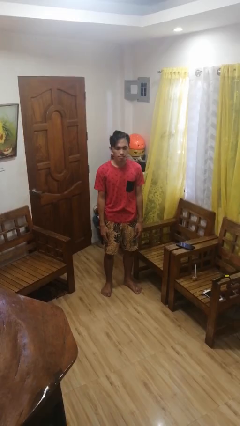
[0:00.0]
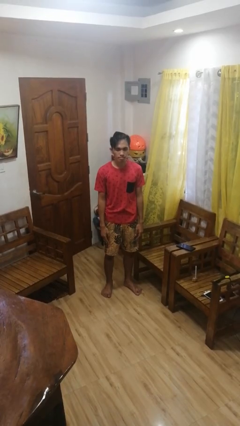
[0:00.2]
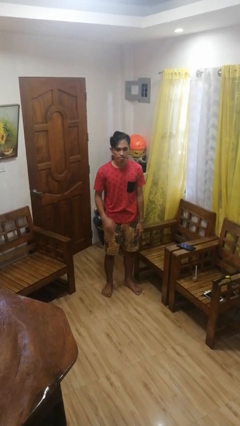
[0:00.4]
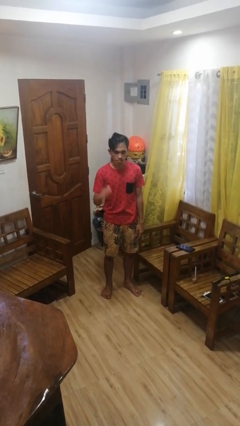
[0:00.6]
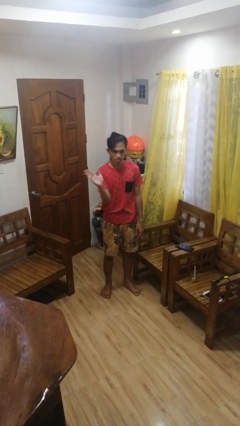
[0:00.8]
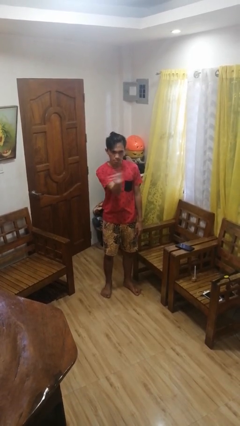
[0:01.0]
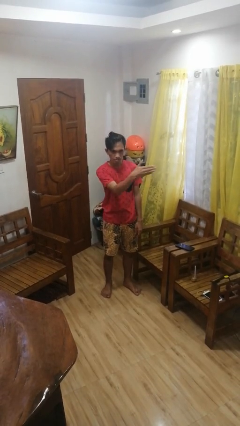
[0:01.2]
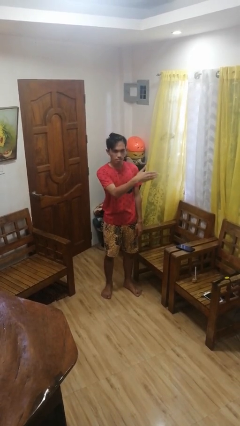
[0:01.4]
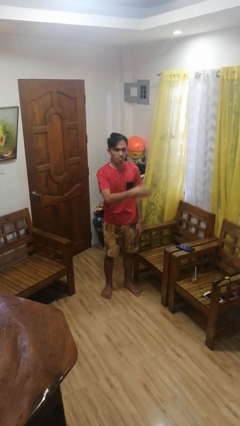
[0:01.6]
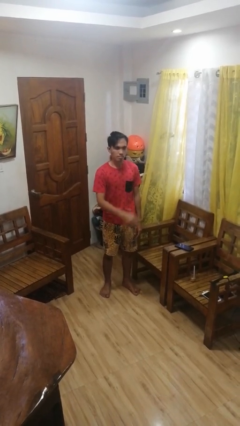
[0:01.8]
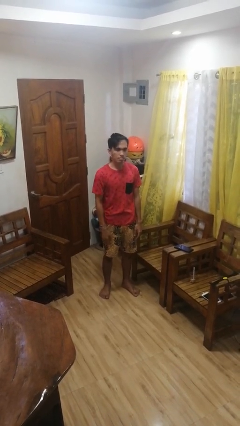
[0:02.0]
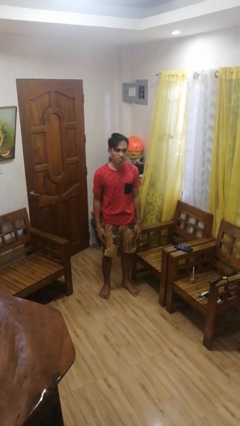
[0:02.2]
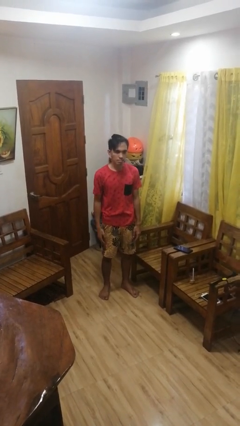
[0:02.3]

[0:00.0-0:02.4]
person gestures swipe left

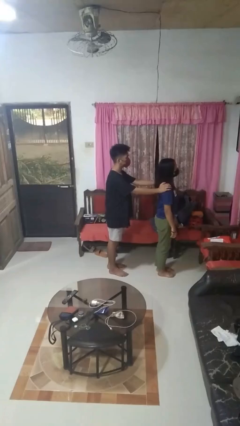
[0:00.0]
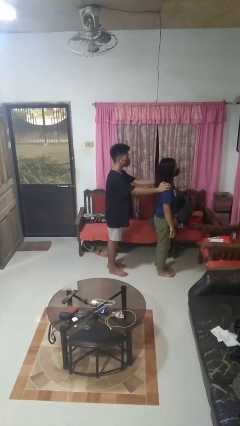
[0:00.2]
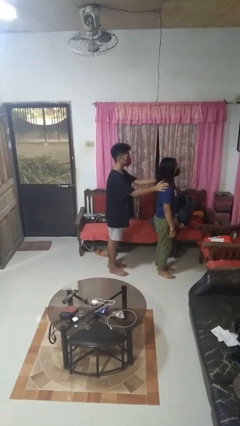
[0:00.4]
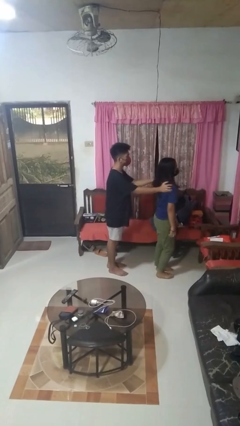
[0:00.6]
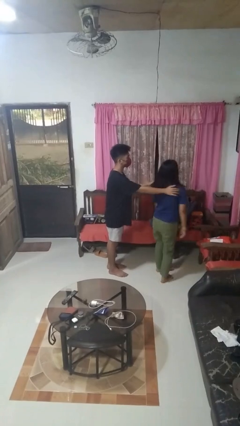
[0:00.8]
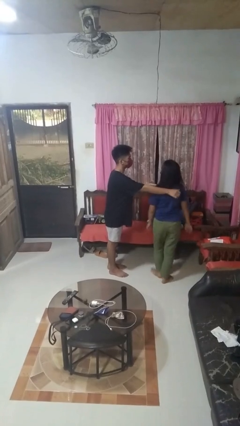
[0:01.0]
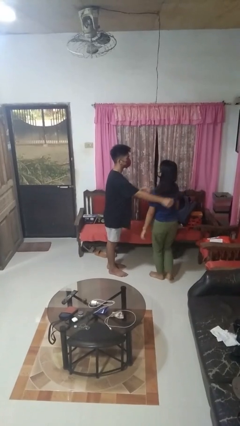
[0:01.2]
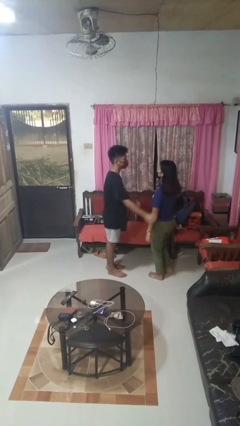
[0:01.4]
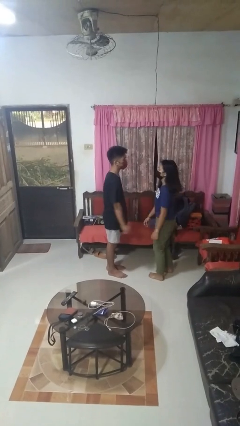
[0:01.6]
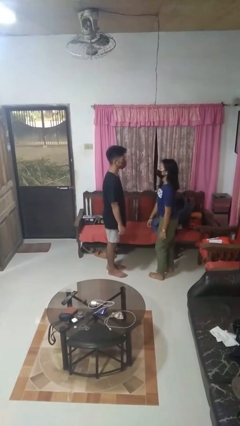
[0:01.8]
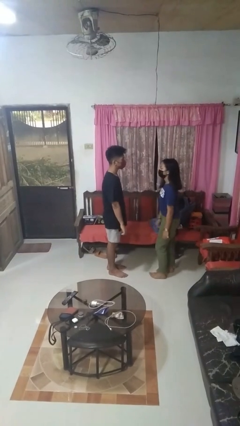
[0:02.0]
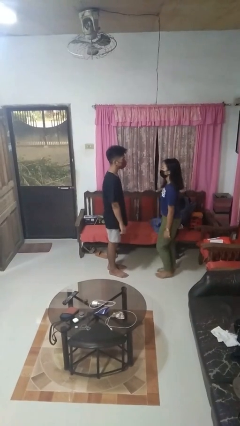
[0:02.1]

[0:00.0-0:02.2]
person spins person around

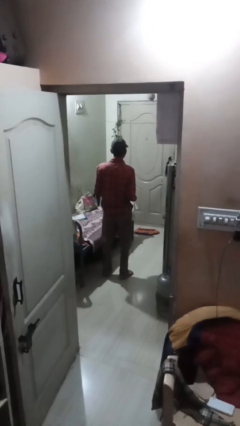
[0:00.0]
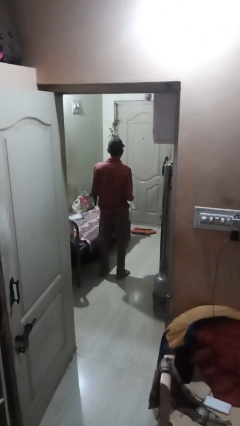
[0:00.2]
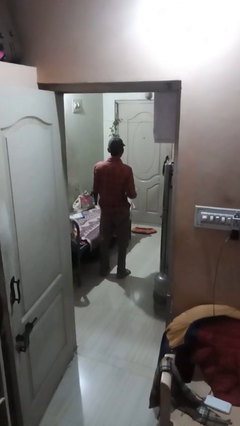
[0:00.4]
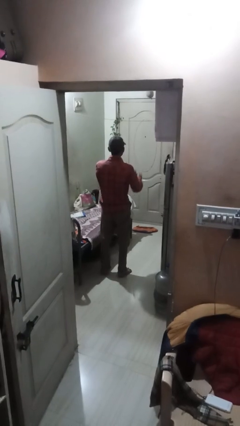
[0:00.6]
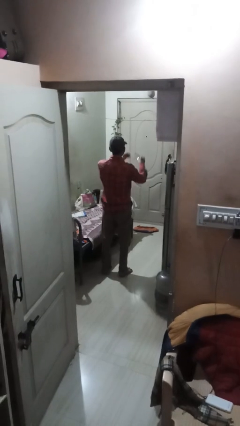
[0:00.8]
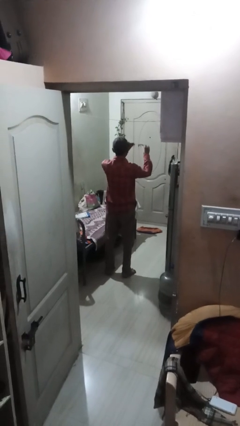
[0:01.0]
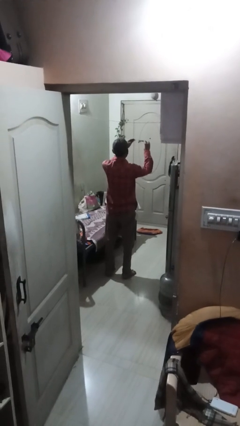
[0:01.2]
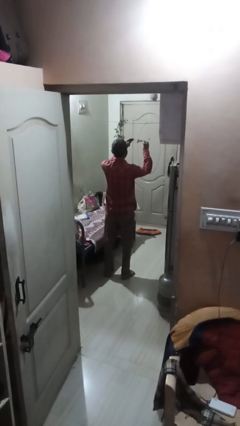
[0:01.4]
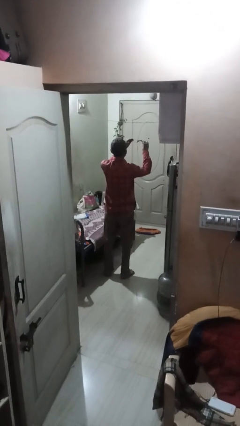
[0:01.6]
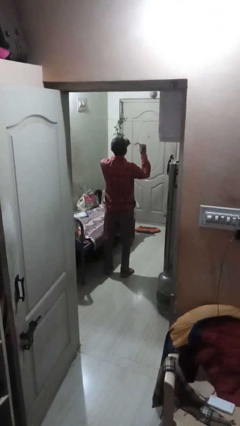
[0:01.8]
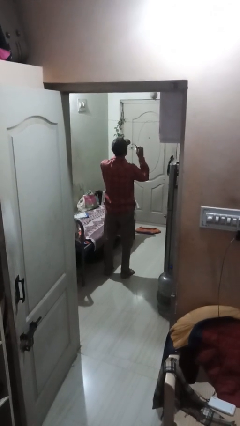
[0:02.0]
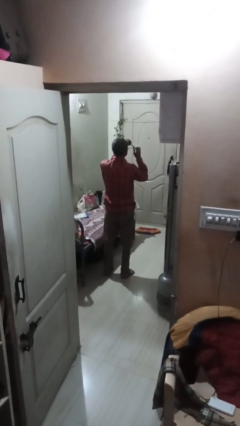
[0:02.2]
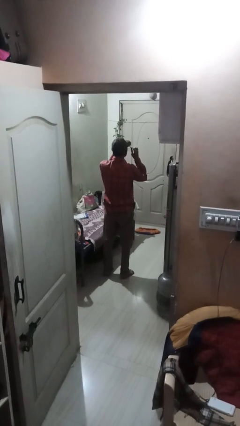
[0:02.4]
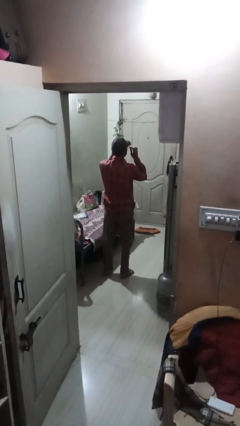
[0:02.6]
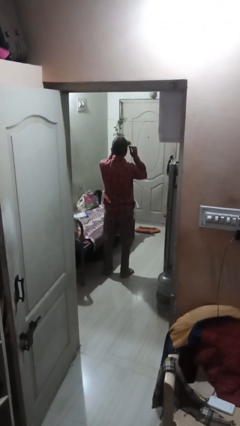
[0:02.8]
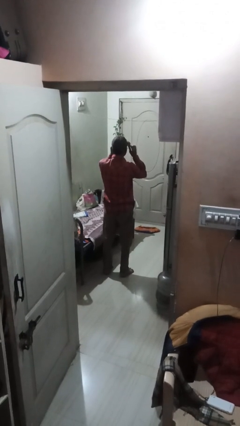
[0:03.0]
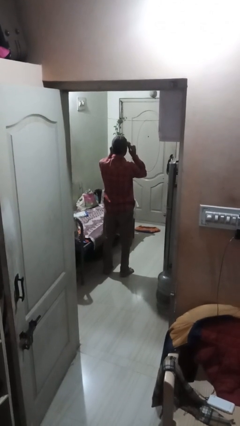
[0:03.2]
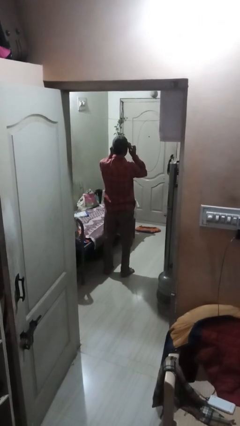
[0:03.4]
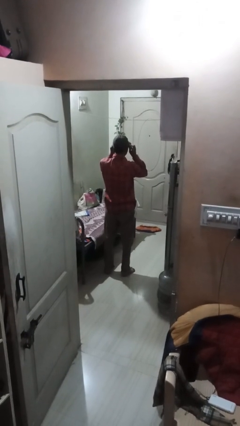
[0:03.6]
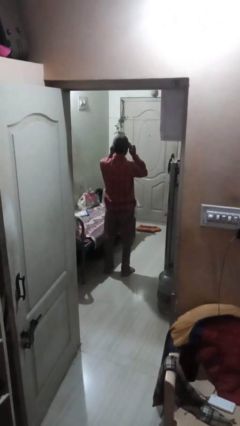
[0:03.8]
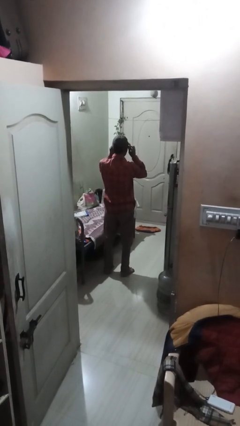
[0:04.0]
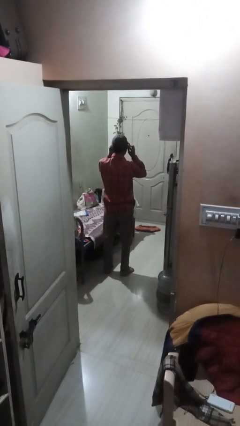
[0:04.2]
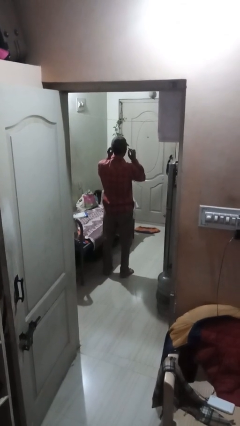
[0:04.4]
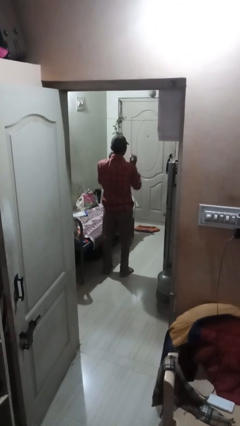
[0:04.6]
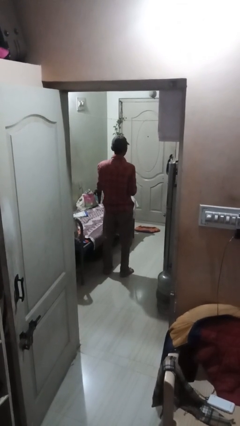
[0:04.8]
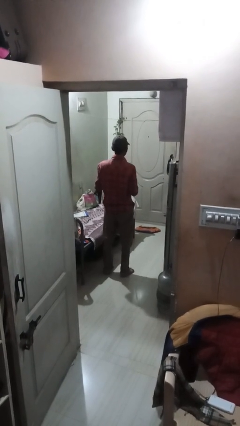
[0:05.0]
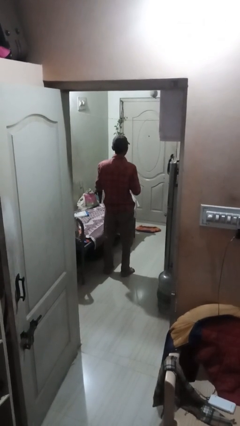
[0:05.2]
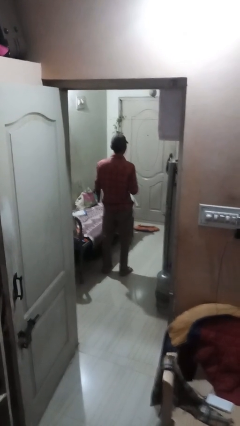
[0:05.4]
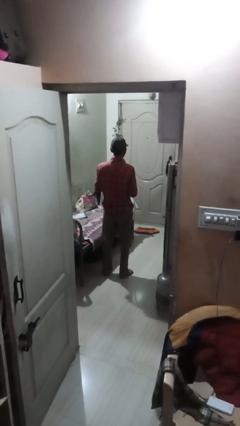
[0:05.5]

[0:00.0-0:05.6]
person puts on glasses

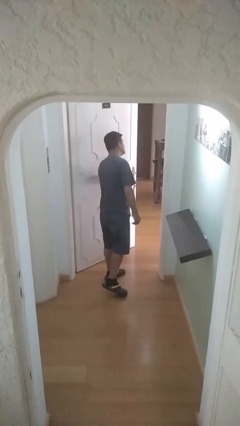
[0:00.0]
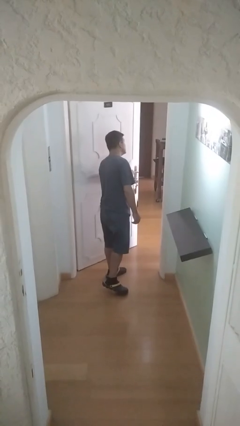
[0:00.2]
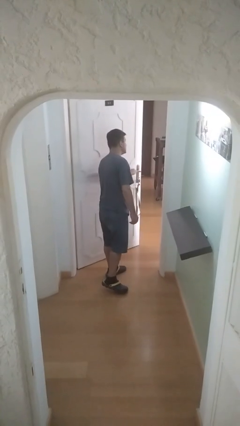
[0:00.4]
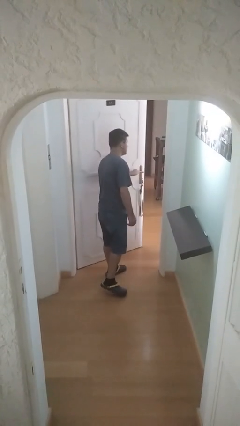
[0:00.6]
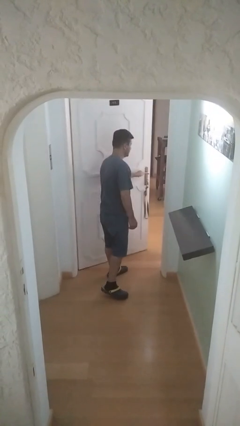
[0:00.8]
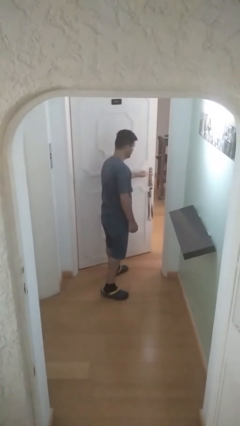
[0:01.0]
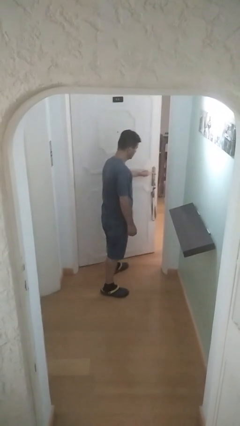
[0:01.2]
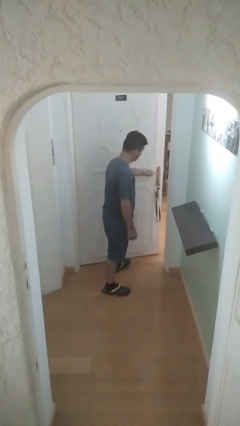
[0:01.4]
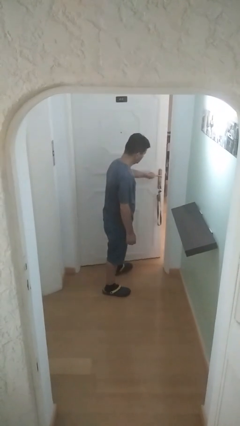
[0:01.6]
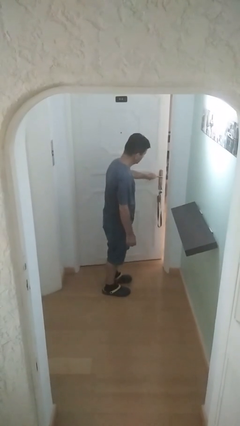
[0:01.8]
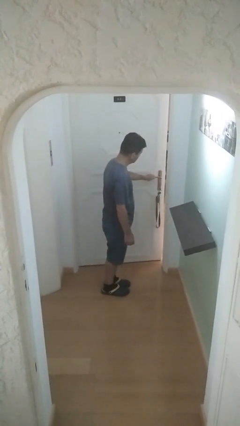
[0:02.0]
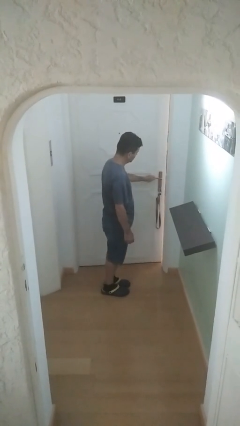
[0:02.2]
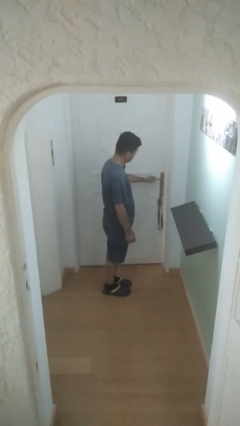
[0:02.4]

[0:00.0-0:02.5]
person closes facility door

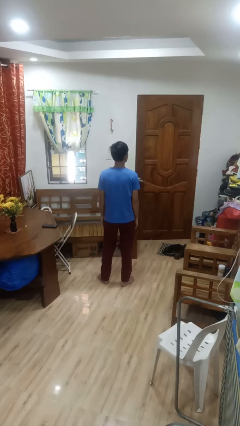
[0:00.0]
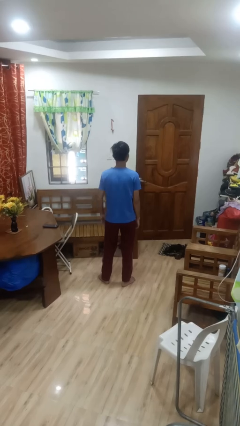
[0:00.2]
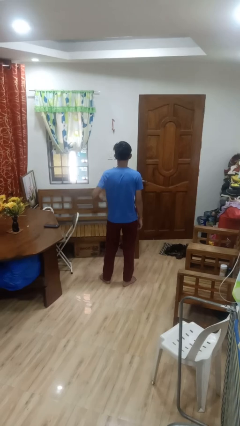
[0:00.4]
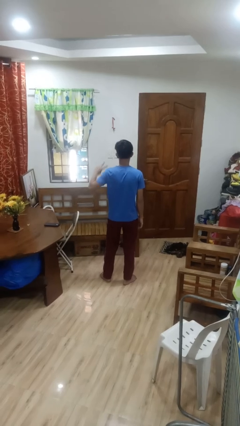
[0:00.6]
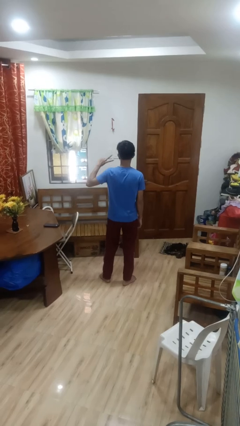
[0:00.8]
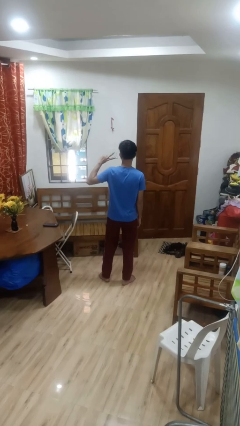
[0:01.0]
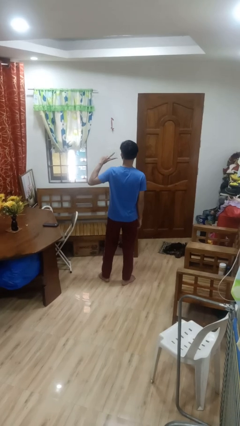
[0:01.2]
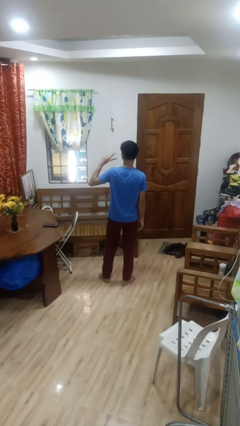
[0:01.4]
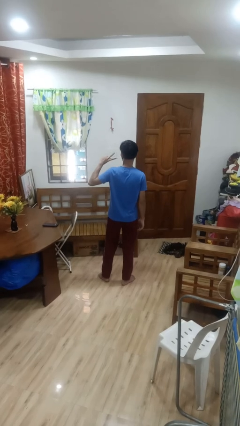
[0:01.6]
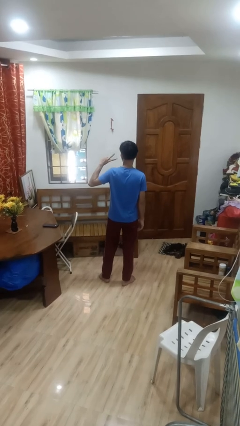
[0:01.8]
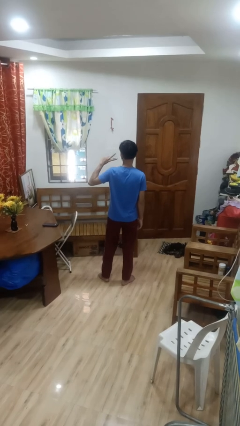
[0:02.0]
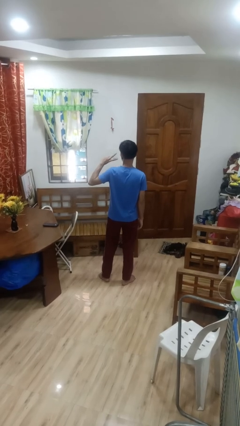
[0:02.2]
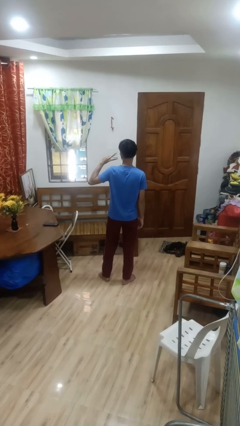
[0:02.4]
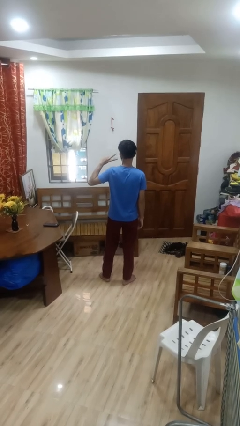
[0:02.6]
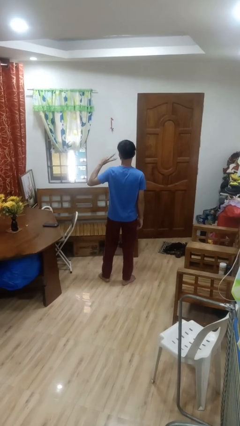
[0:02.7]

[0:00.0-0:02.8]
person gestures peace

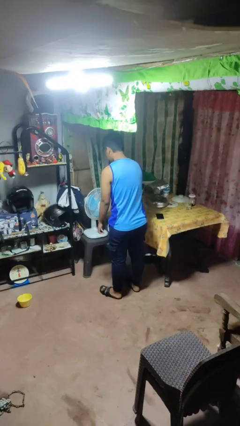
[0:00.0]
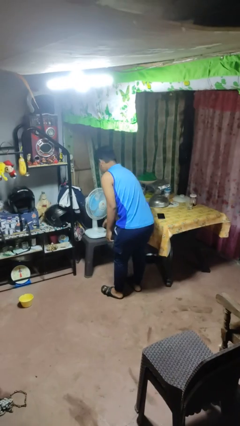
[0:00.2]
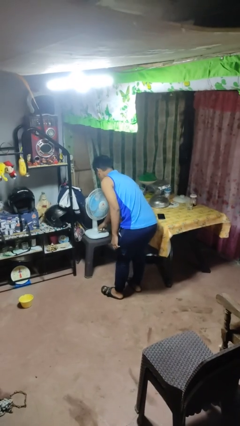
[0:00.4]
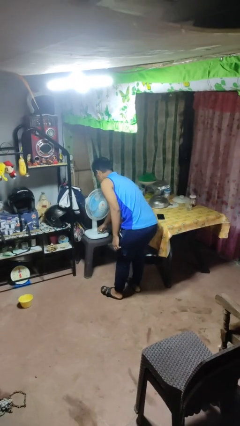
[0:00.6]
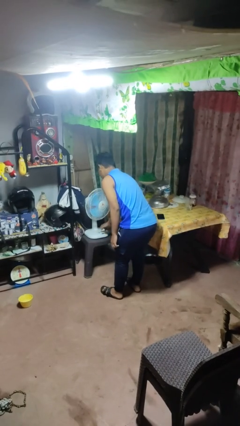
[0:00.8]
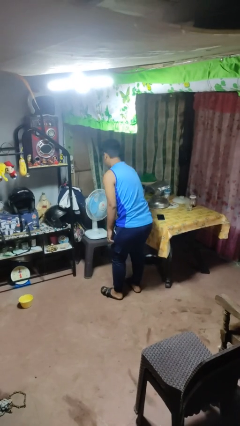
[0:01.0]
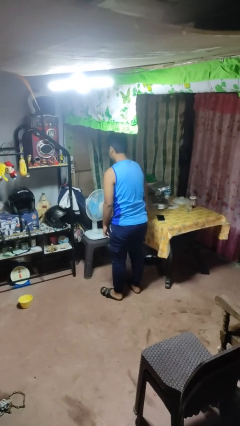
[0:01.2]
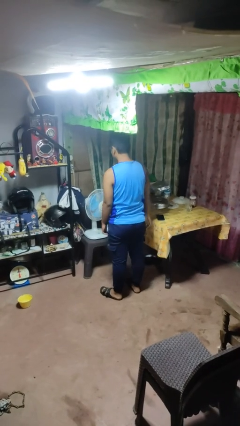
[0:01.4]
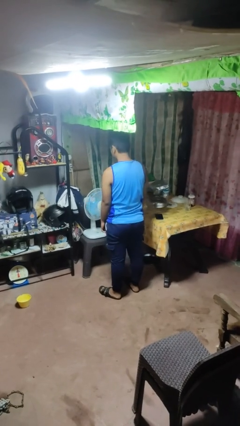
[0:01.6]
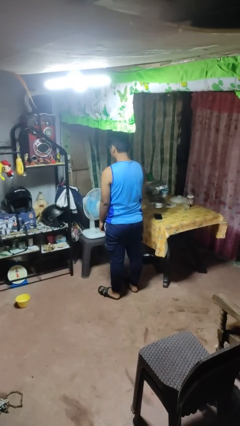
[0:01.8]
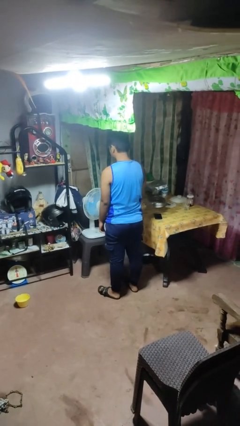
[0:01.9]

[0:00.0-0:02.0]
person turns on fan

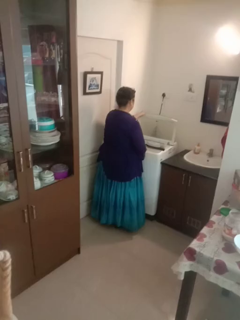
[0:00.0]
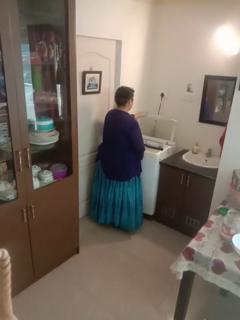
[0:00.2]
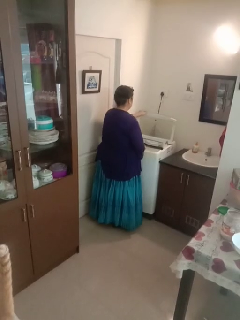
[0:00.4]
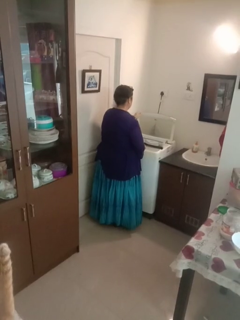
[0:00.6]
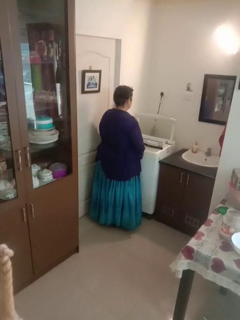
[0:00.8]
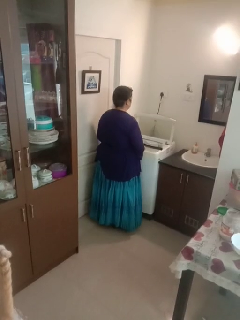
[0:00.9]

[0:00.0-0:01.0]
person opens clothes washer
